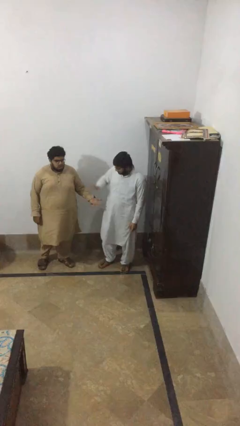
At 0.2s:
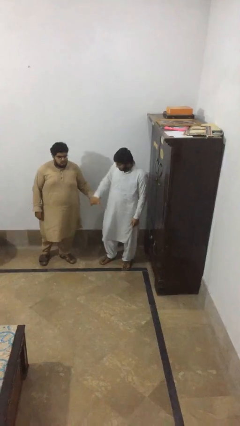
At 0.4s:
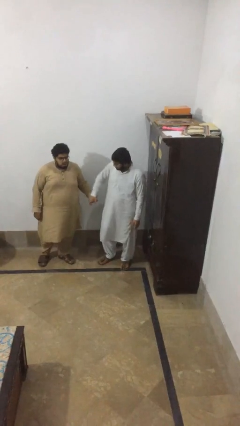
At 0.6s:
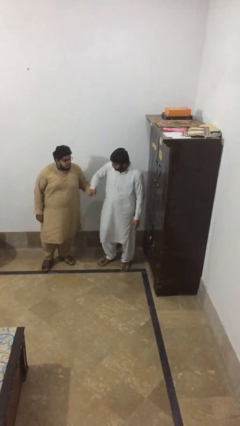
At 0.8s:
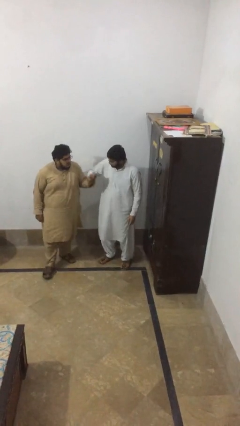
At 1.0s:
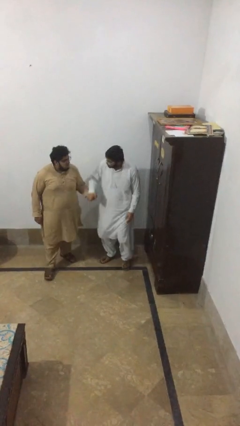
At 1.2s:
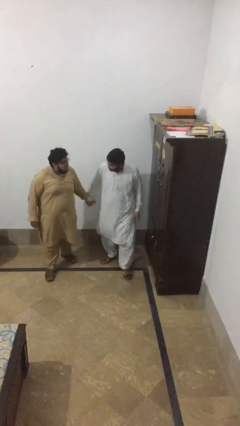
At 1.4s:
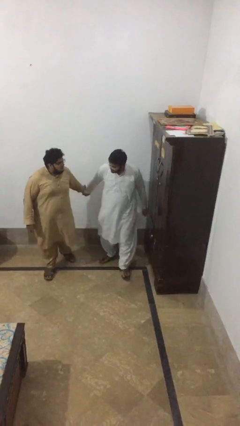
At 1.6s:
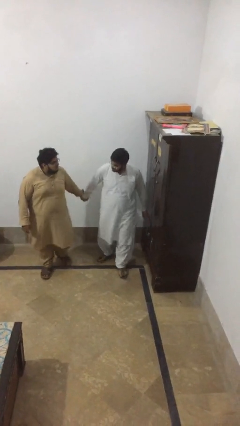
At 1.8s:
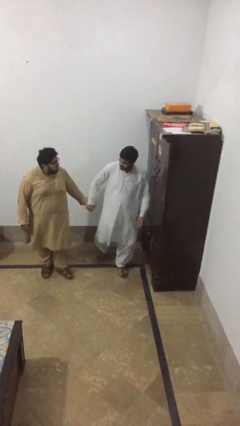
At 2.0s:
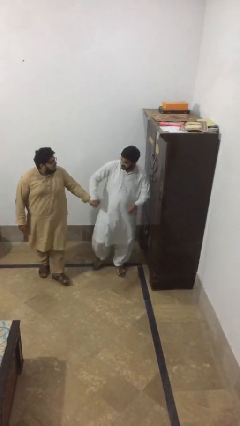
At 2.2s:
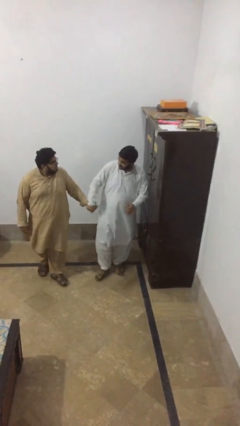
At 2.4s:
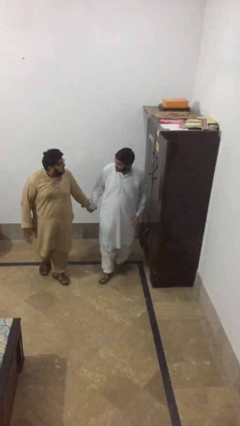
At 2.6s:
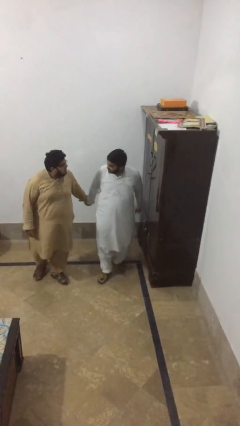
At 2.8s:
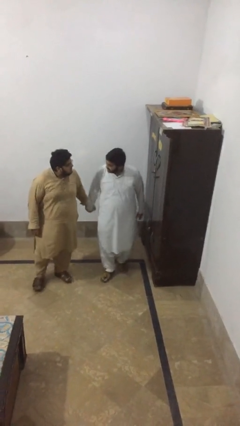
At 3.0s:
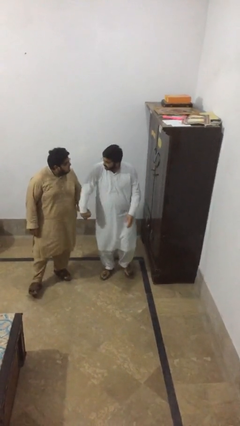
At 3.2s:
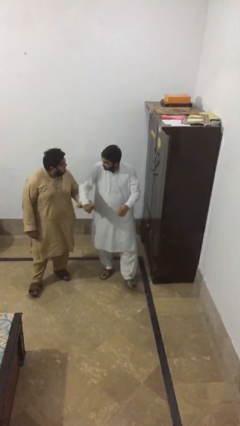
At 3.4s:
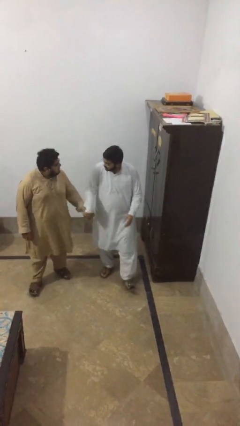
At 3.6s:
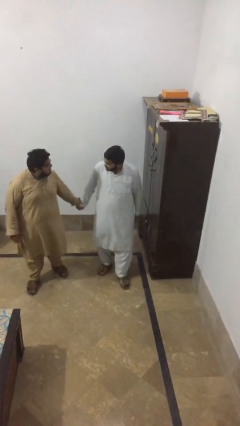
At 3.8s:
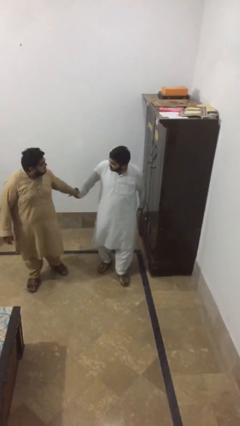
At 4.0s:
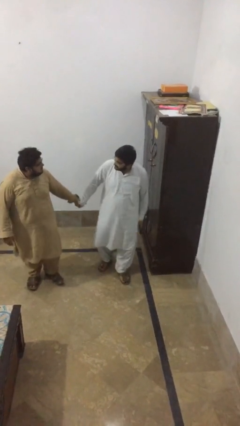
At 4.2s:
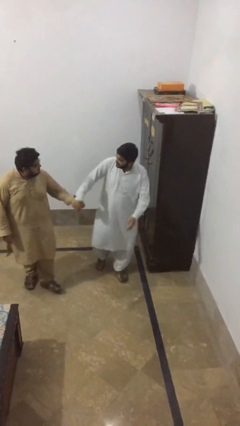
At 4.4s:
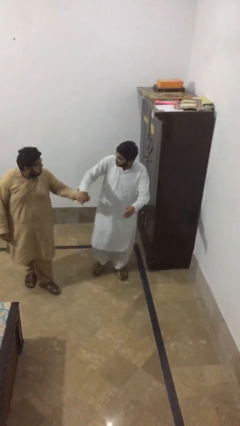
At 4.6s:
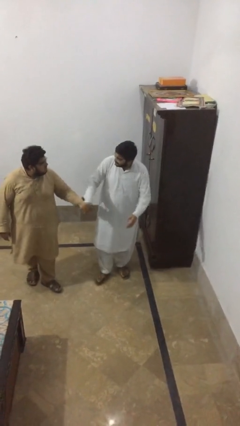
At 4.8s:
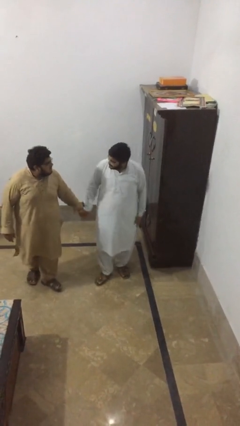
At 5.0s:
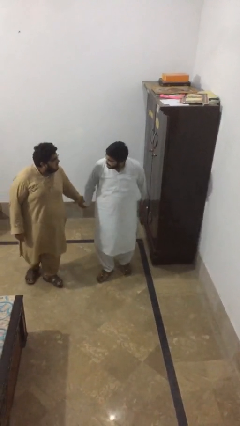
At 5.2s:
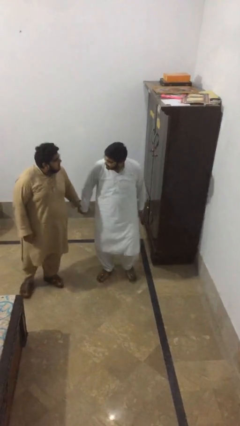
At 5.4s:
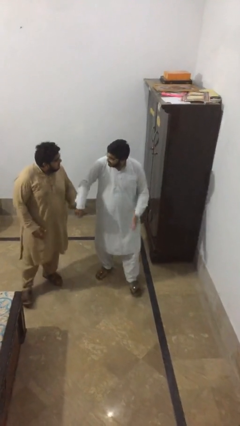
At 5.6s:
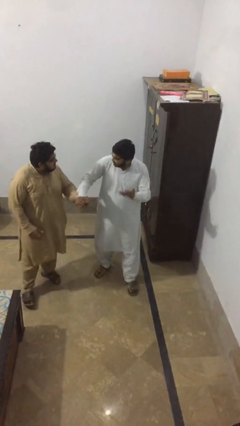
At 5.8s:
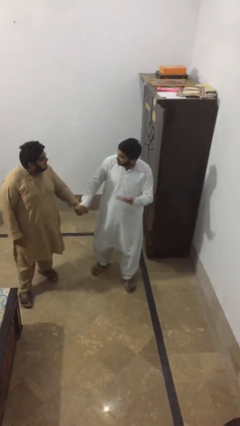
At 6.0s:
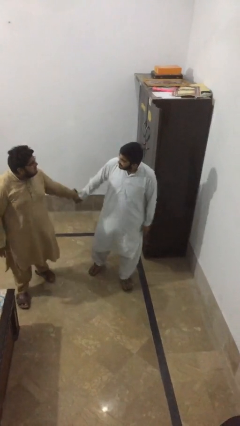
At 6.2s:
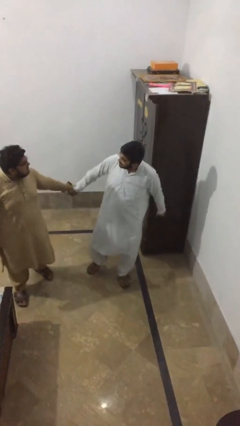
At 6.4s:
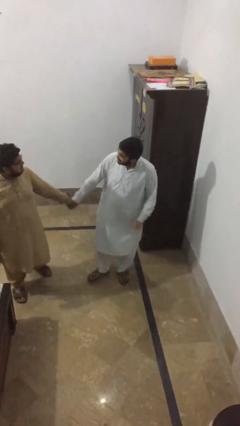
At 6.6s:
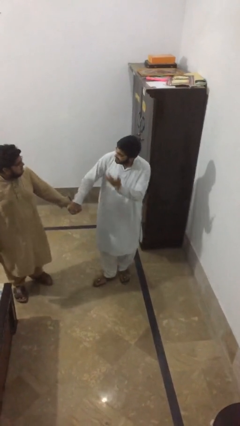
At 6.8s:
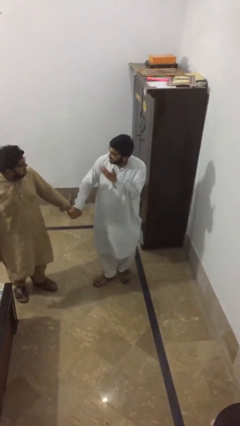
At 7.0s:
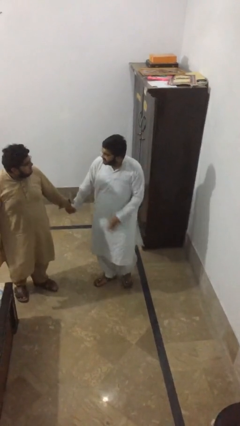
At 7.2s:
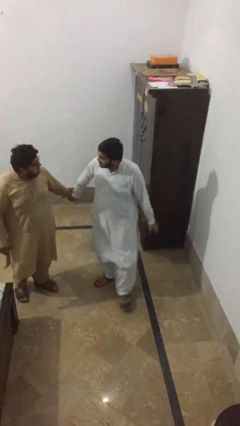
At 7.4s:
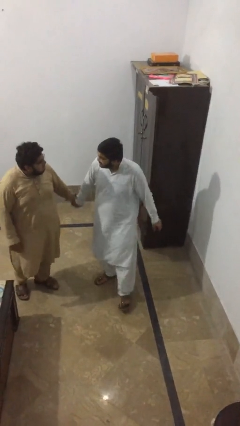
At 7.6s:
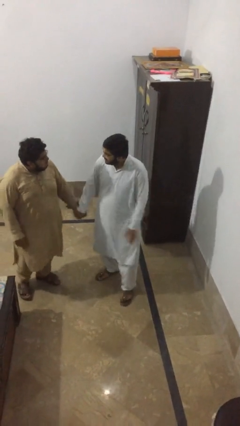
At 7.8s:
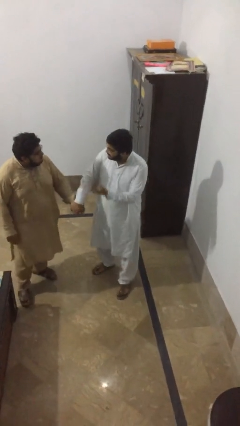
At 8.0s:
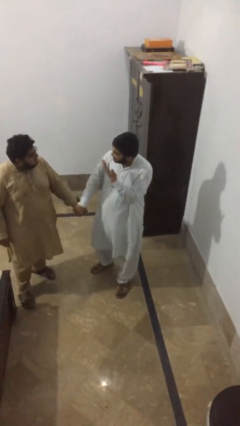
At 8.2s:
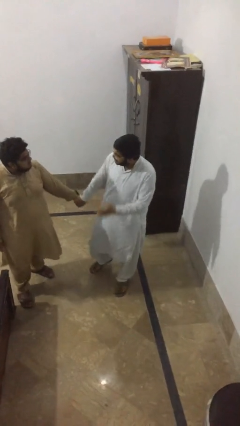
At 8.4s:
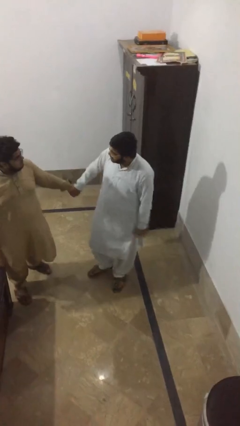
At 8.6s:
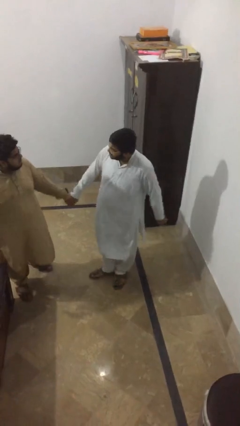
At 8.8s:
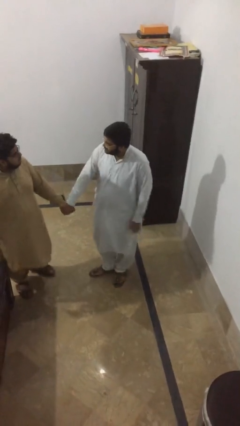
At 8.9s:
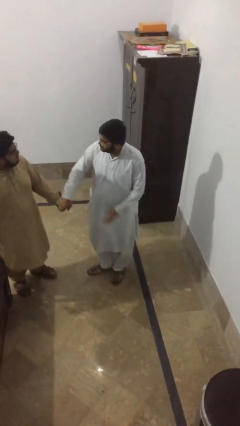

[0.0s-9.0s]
person holds hand

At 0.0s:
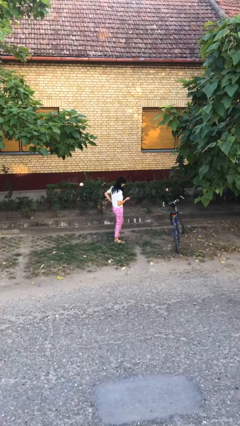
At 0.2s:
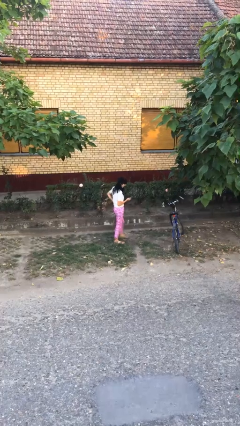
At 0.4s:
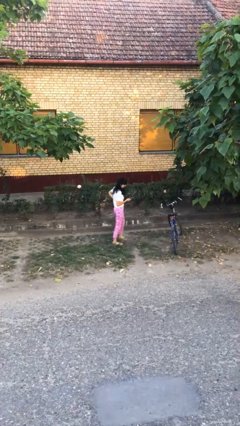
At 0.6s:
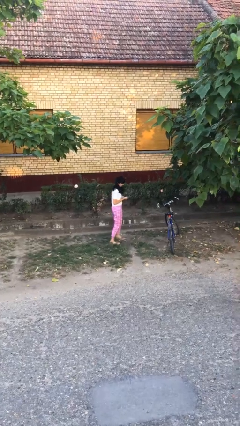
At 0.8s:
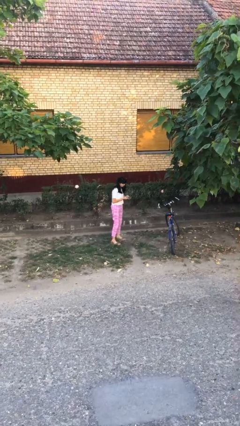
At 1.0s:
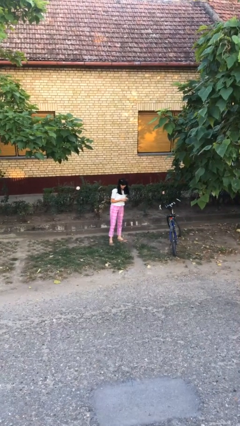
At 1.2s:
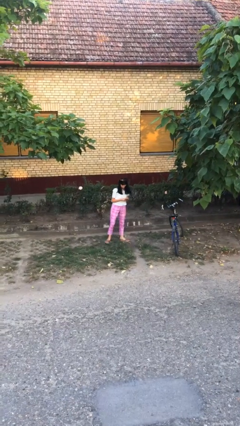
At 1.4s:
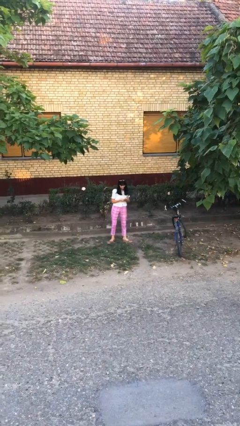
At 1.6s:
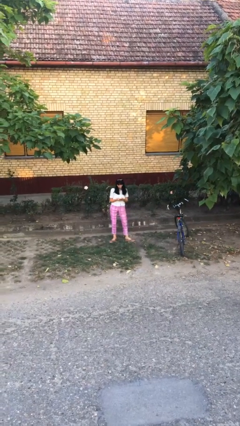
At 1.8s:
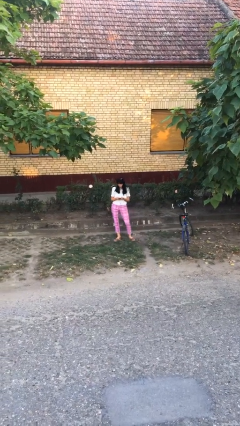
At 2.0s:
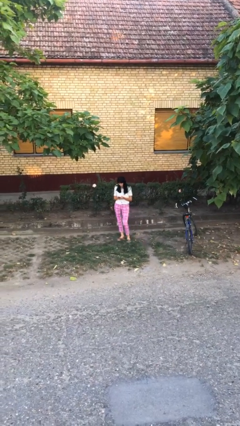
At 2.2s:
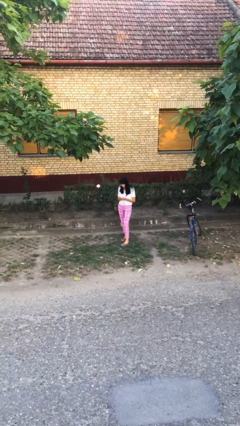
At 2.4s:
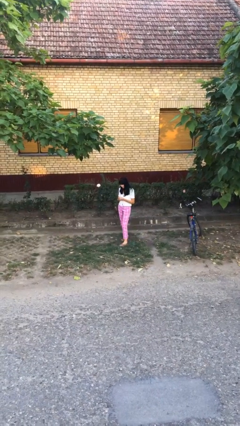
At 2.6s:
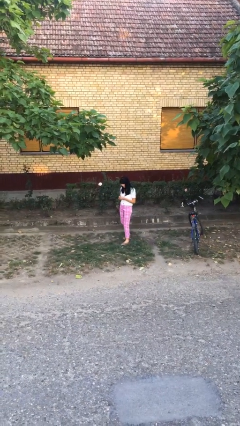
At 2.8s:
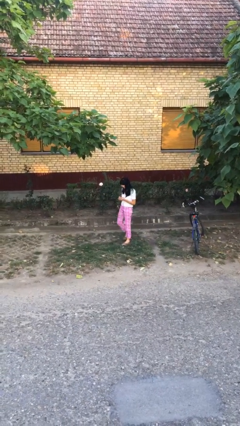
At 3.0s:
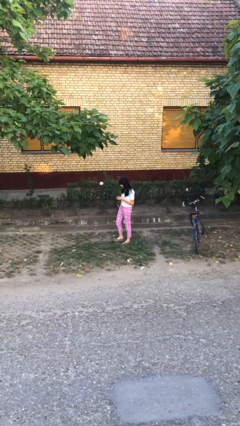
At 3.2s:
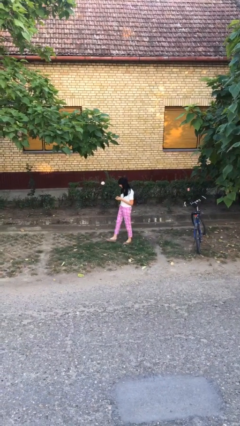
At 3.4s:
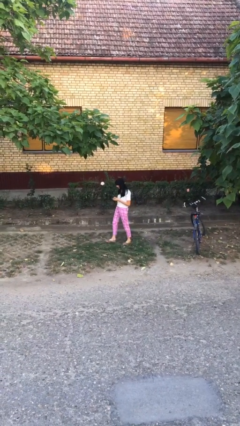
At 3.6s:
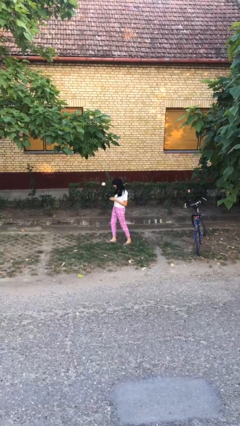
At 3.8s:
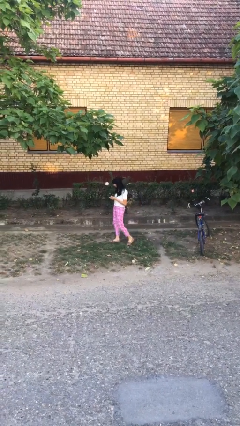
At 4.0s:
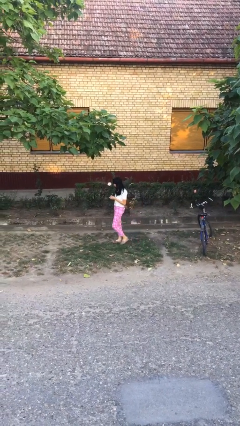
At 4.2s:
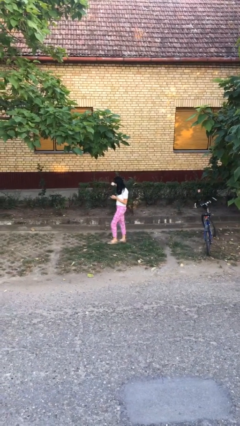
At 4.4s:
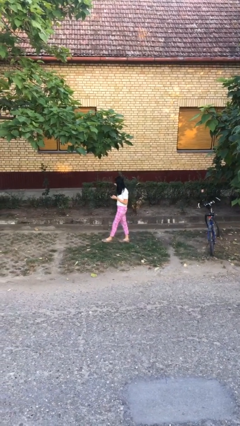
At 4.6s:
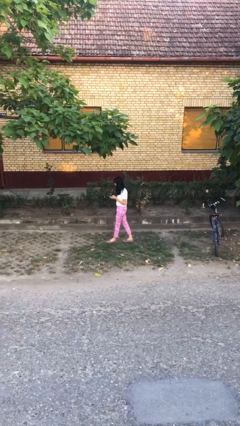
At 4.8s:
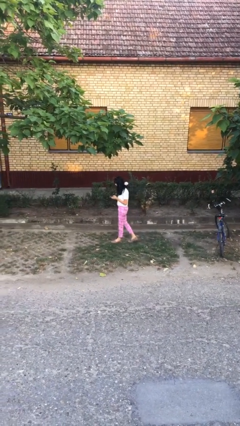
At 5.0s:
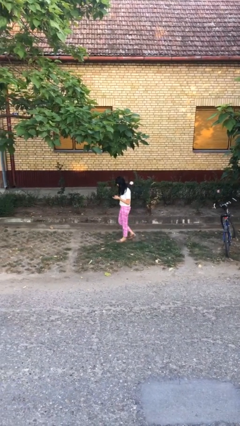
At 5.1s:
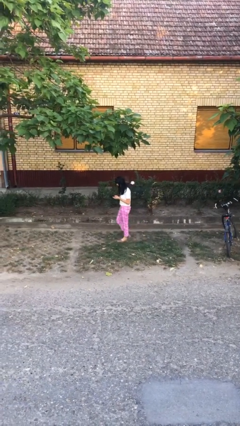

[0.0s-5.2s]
person texts on phone

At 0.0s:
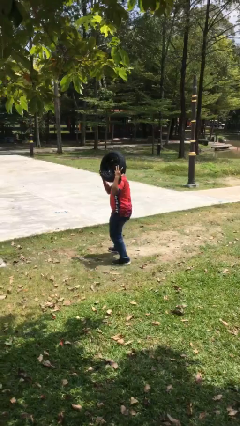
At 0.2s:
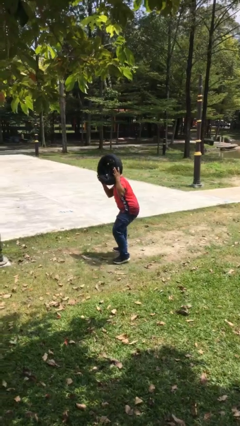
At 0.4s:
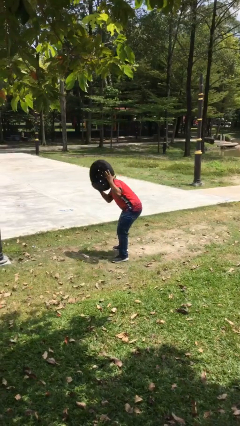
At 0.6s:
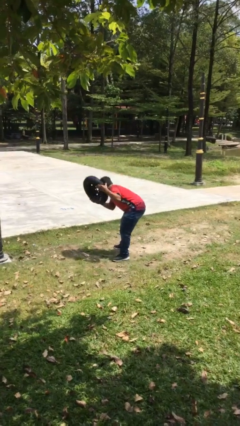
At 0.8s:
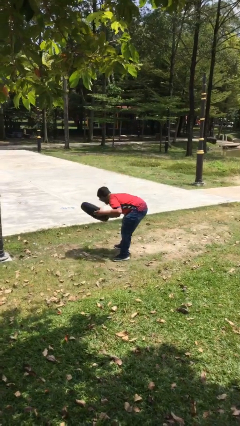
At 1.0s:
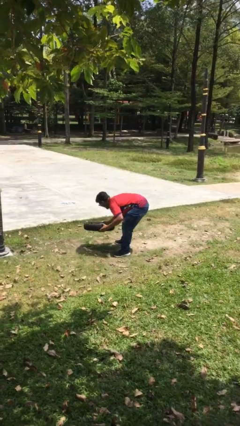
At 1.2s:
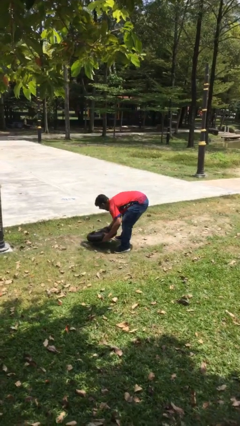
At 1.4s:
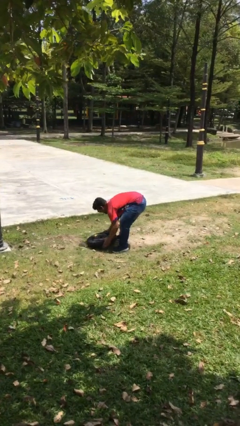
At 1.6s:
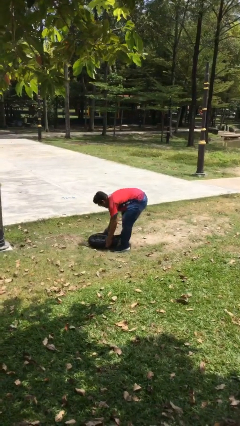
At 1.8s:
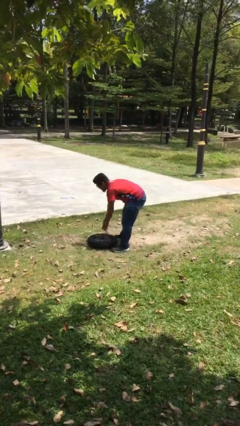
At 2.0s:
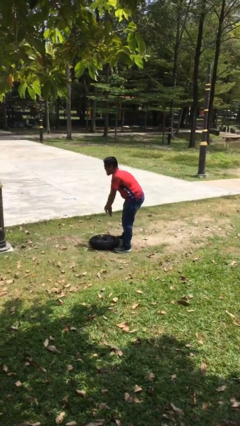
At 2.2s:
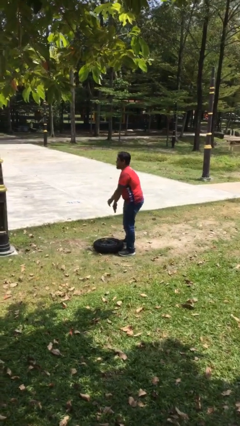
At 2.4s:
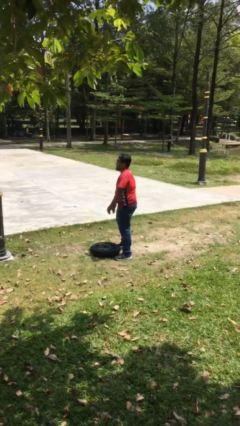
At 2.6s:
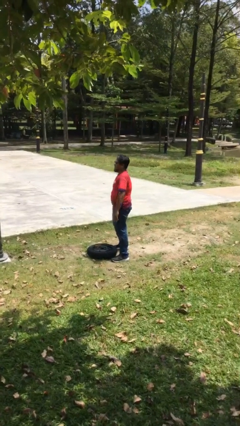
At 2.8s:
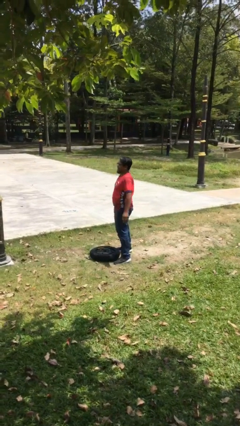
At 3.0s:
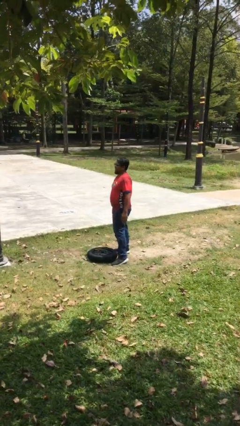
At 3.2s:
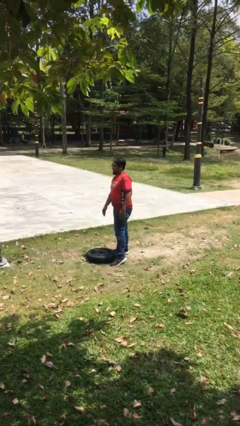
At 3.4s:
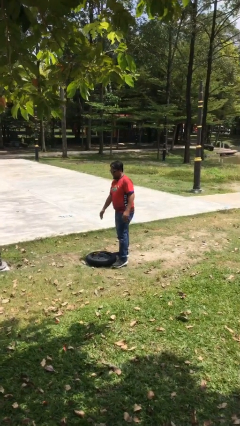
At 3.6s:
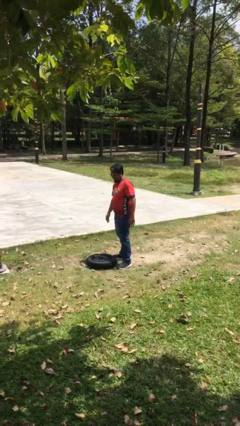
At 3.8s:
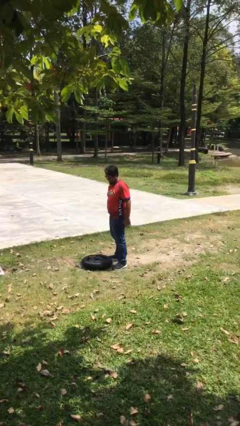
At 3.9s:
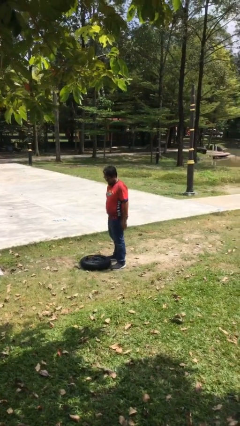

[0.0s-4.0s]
person puts down object on floor
